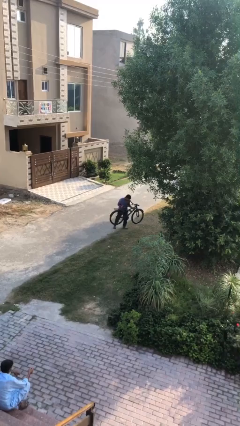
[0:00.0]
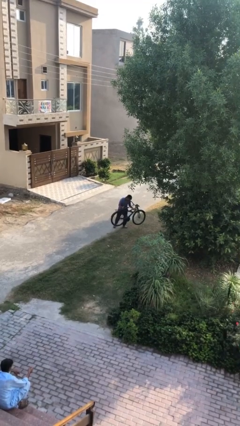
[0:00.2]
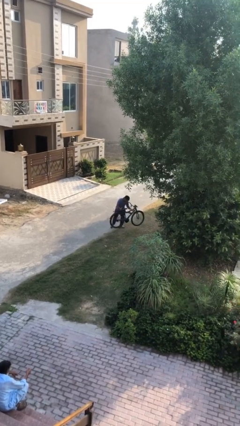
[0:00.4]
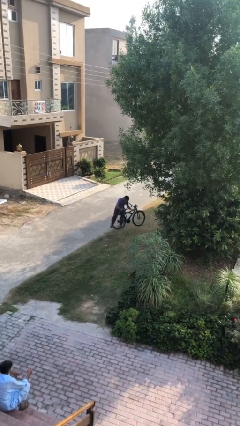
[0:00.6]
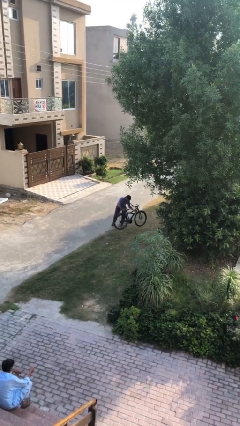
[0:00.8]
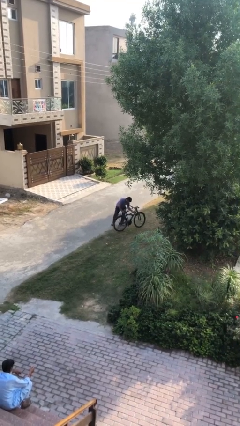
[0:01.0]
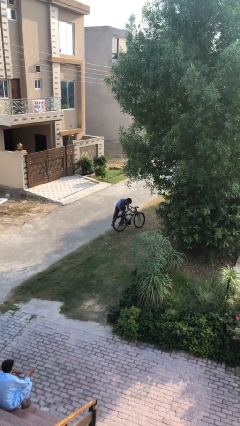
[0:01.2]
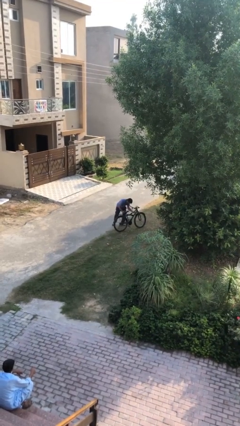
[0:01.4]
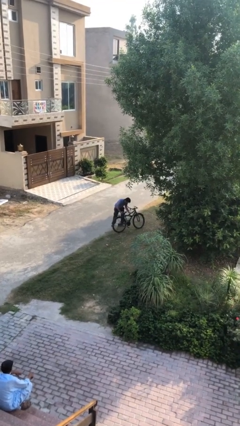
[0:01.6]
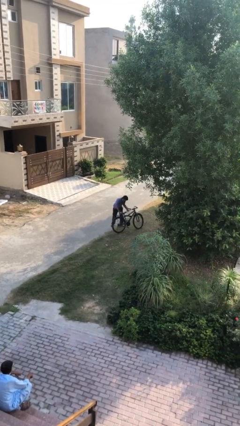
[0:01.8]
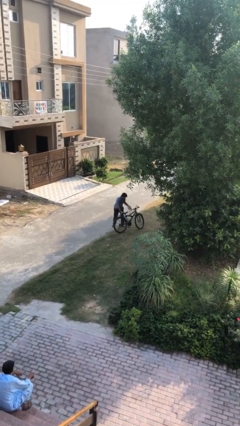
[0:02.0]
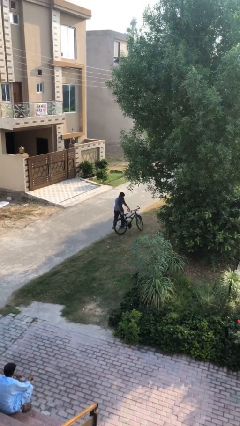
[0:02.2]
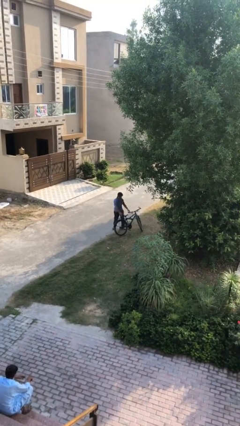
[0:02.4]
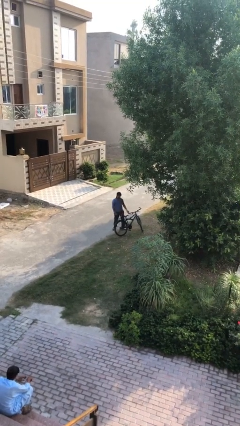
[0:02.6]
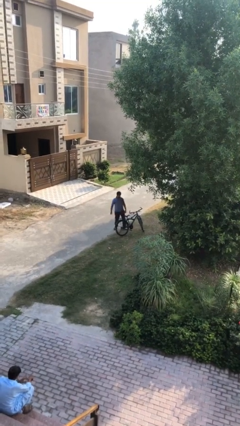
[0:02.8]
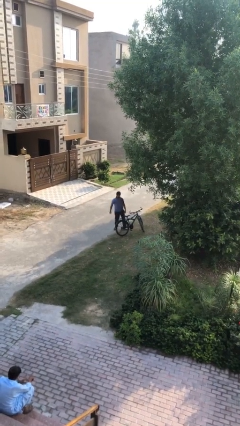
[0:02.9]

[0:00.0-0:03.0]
person puts down object on floor

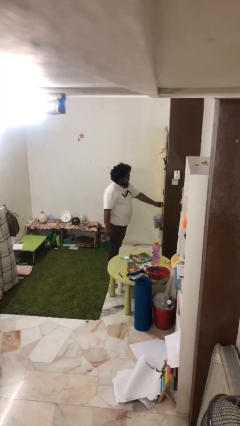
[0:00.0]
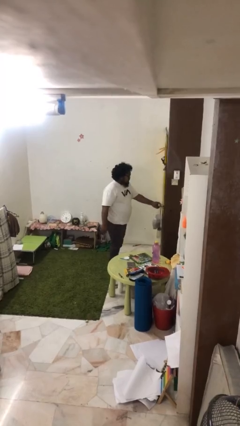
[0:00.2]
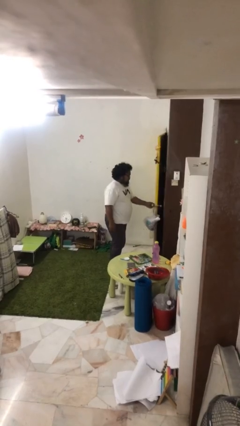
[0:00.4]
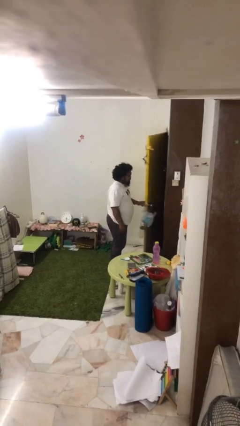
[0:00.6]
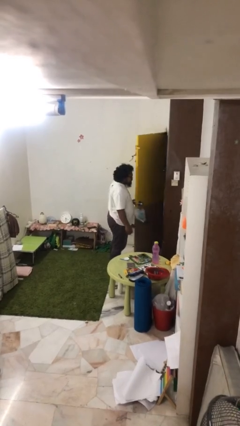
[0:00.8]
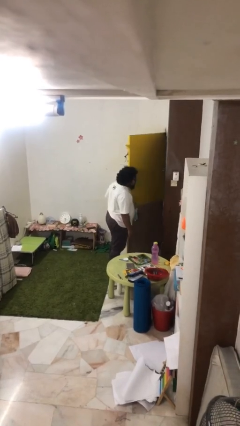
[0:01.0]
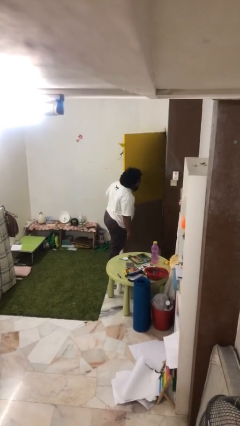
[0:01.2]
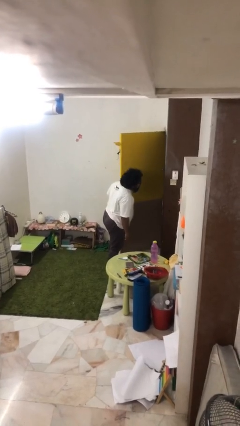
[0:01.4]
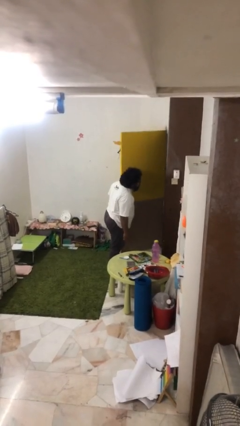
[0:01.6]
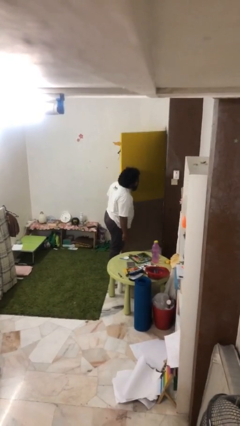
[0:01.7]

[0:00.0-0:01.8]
person opens facility door

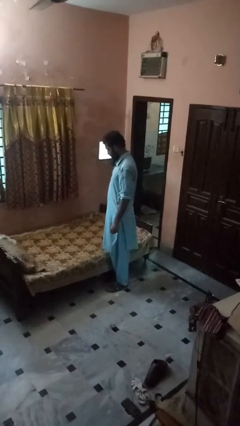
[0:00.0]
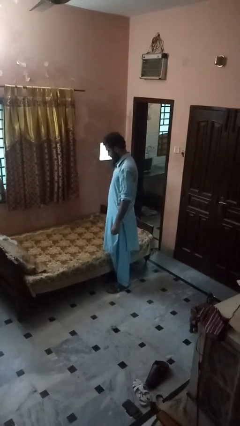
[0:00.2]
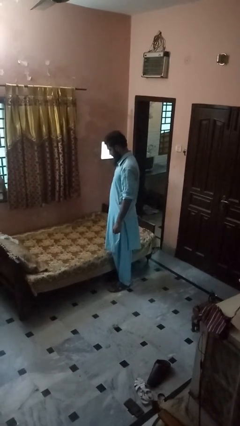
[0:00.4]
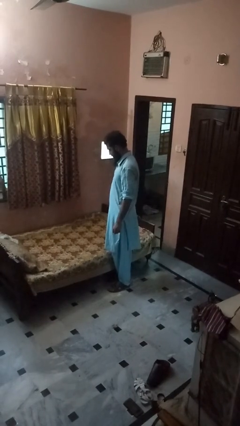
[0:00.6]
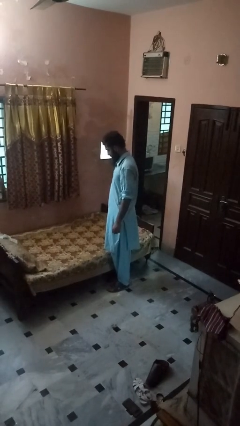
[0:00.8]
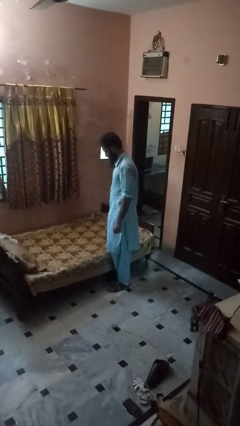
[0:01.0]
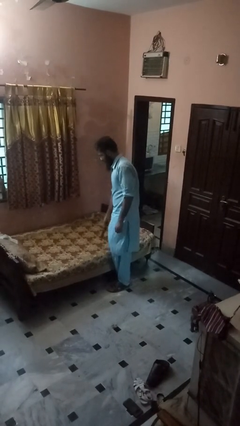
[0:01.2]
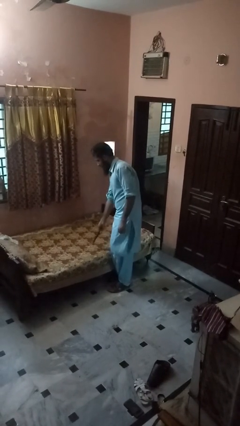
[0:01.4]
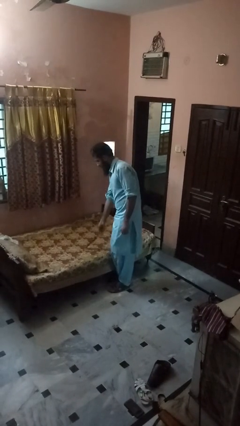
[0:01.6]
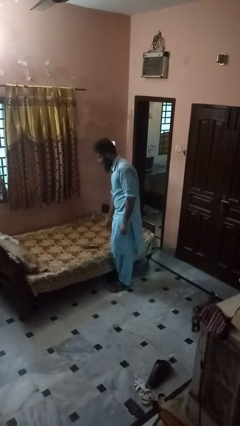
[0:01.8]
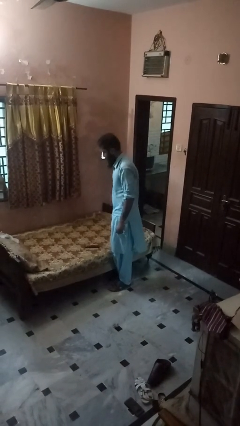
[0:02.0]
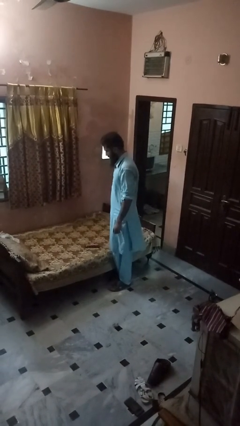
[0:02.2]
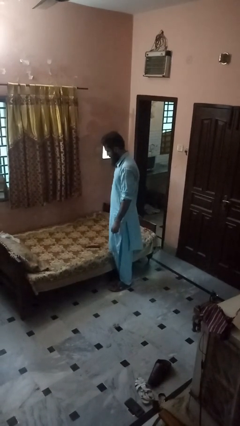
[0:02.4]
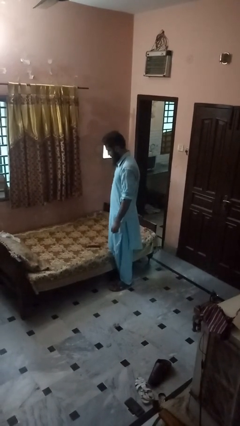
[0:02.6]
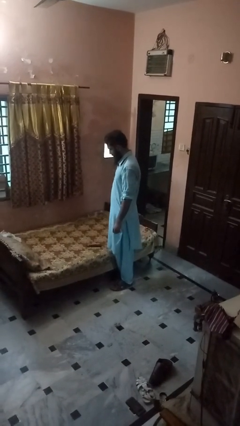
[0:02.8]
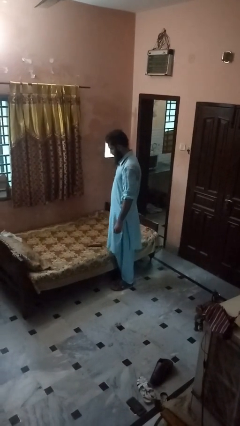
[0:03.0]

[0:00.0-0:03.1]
person puts down object on bed

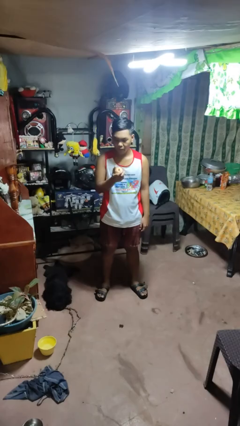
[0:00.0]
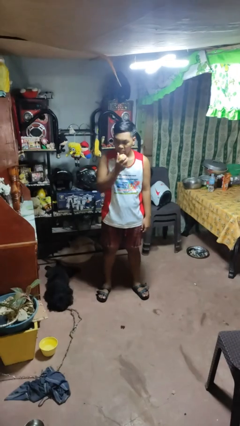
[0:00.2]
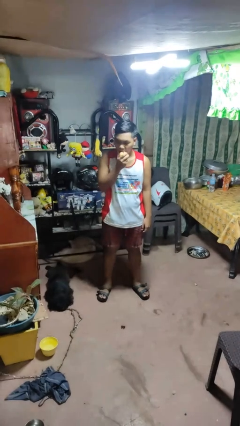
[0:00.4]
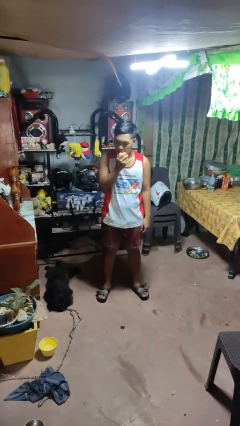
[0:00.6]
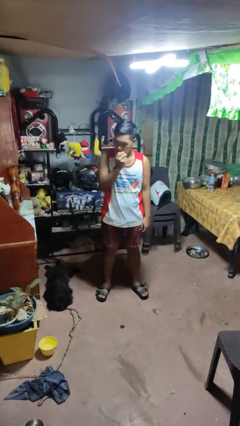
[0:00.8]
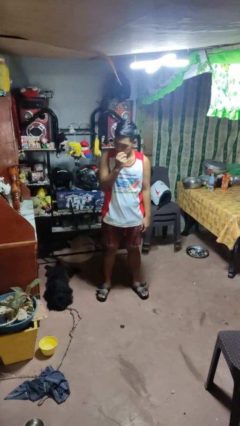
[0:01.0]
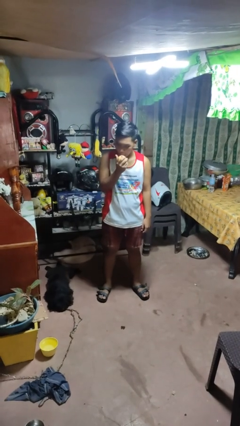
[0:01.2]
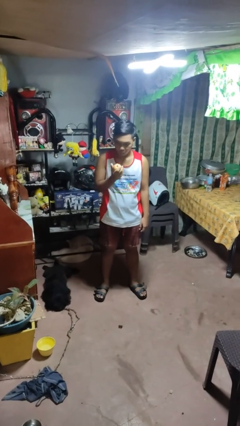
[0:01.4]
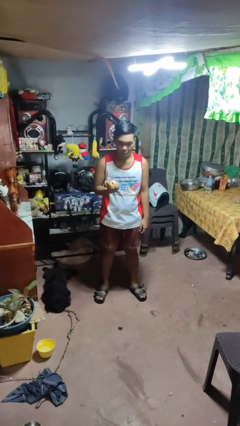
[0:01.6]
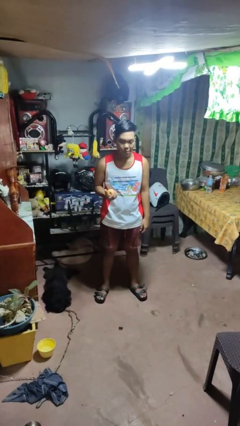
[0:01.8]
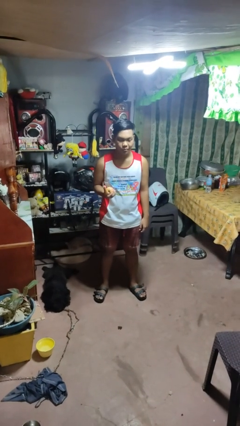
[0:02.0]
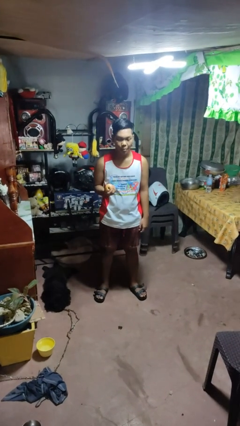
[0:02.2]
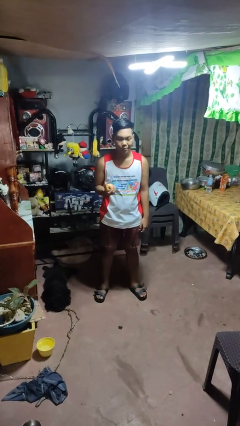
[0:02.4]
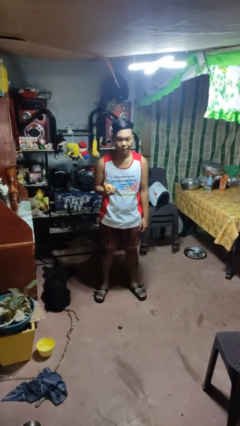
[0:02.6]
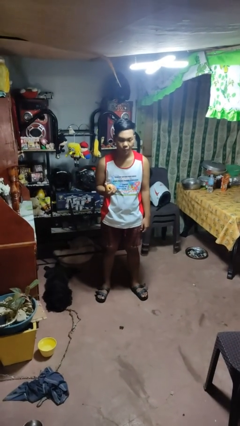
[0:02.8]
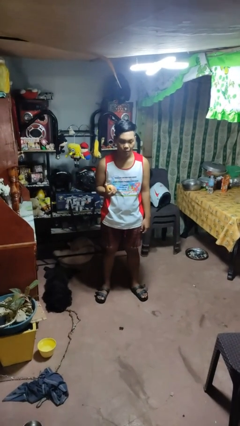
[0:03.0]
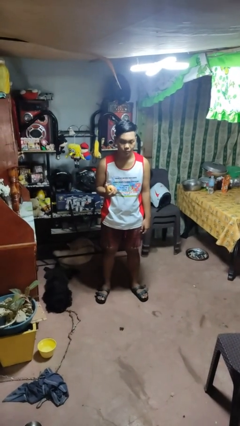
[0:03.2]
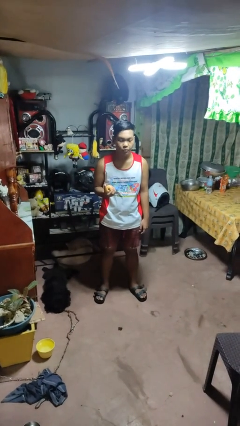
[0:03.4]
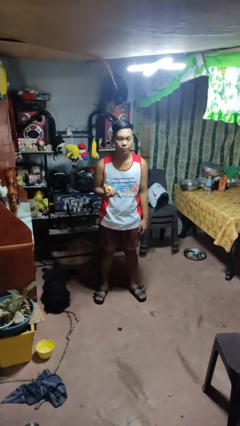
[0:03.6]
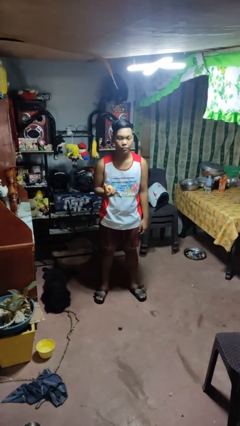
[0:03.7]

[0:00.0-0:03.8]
person eats apple

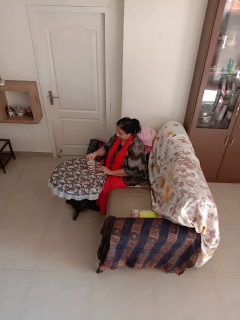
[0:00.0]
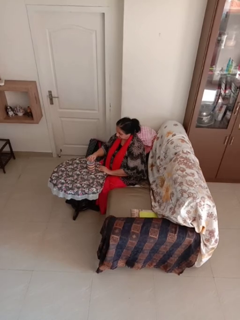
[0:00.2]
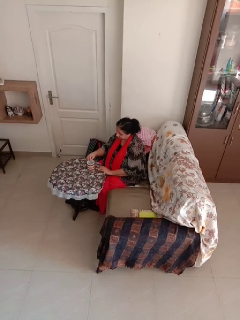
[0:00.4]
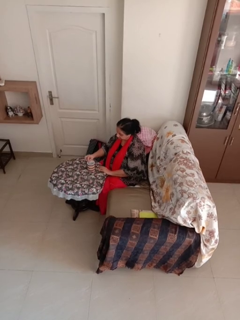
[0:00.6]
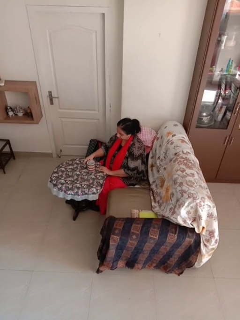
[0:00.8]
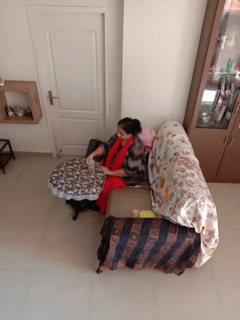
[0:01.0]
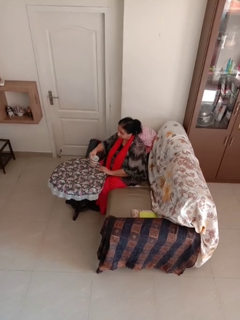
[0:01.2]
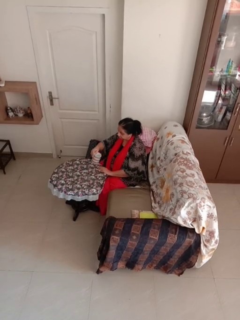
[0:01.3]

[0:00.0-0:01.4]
person stirs mug

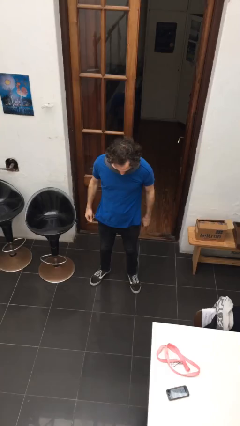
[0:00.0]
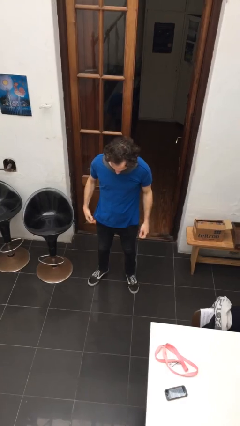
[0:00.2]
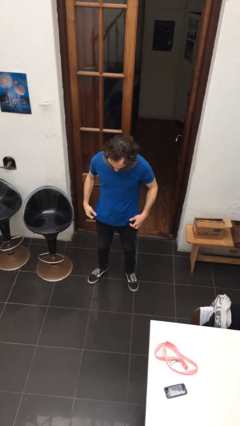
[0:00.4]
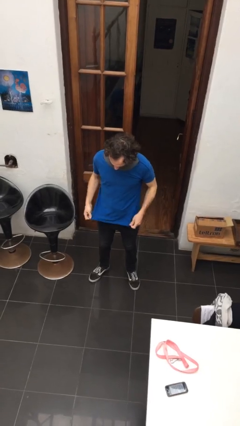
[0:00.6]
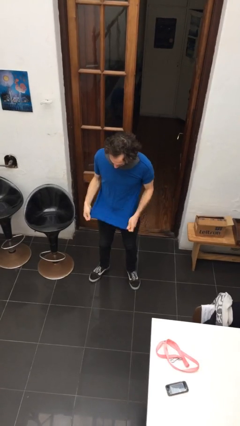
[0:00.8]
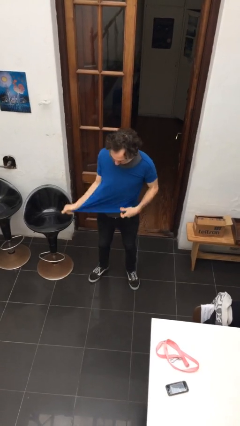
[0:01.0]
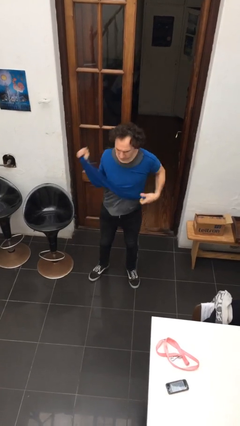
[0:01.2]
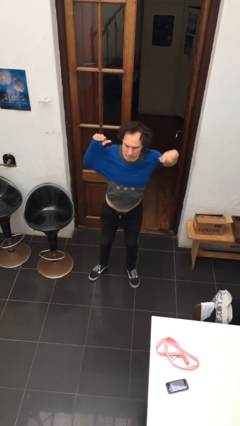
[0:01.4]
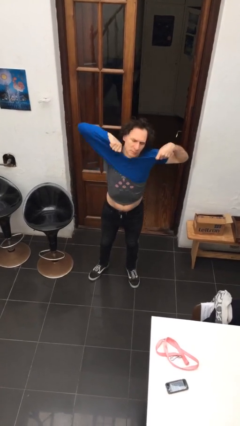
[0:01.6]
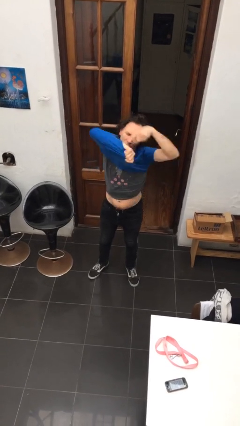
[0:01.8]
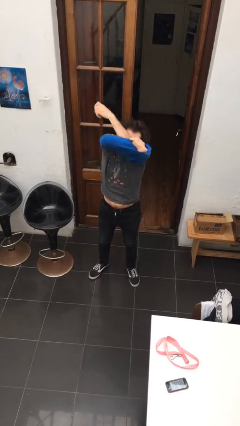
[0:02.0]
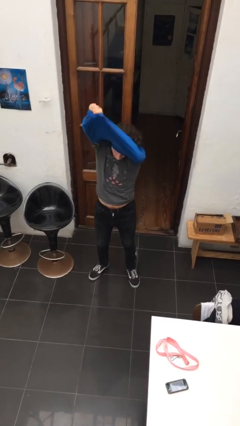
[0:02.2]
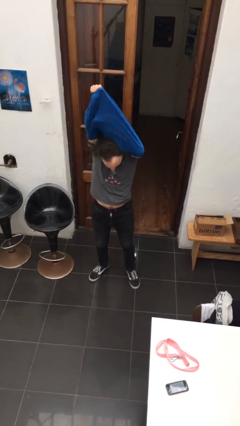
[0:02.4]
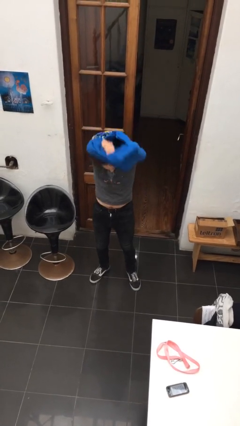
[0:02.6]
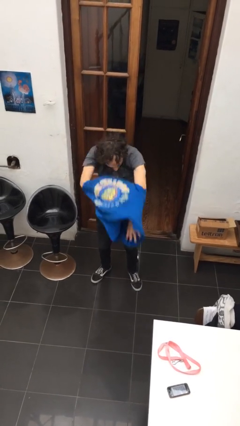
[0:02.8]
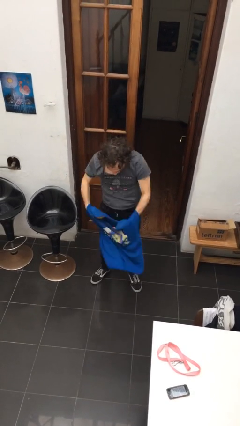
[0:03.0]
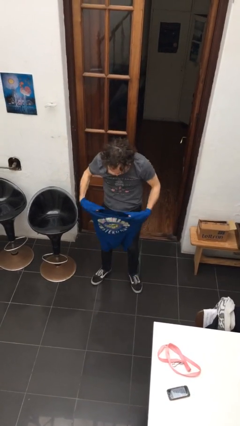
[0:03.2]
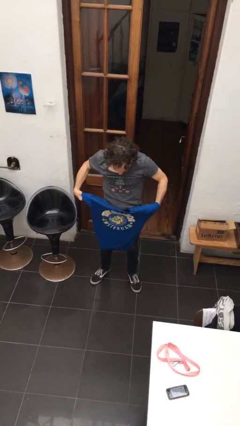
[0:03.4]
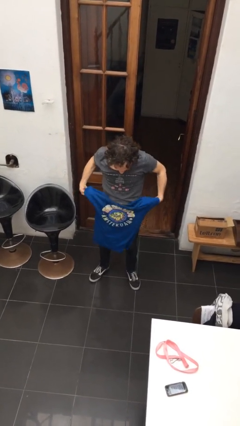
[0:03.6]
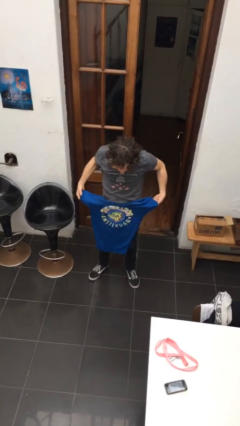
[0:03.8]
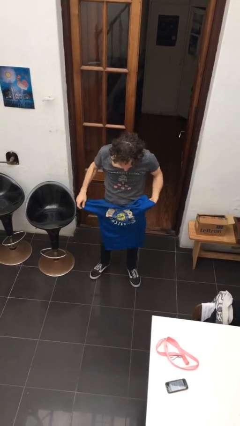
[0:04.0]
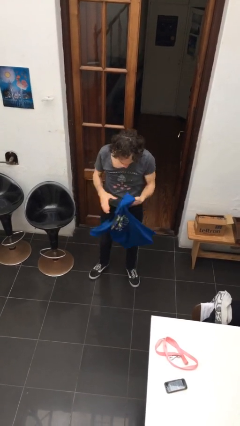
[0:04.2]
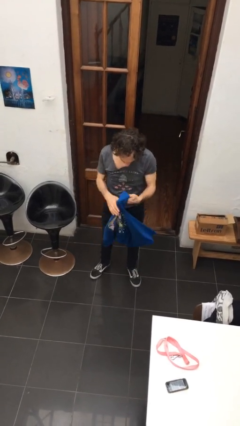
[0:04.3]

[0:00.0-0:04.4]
person takes off shirt

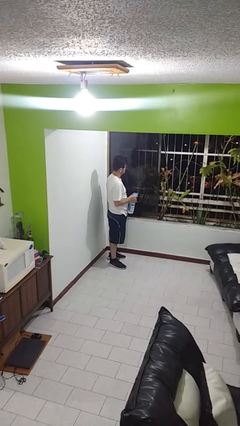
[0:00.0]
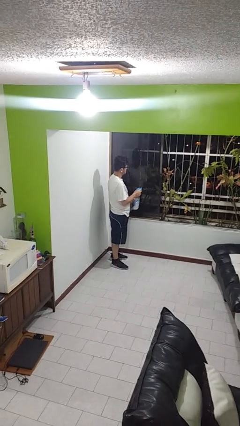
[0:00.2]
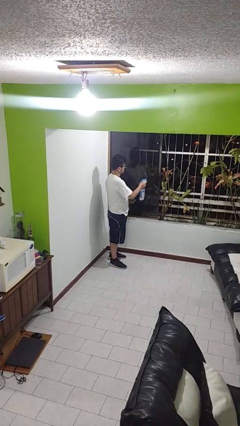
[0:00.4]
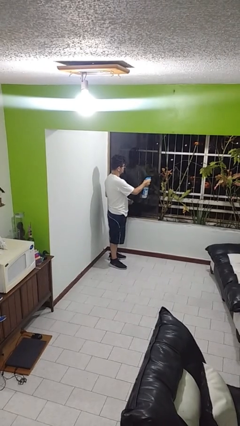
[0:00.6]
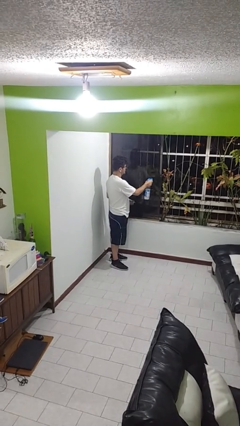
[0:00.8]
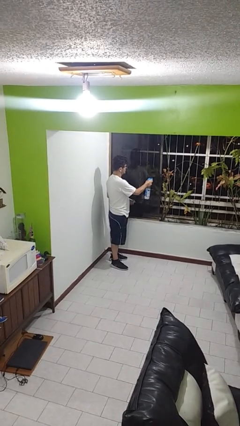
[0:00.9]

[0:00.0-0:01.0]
person sprays from bottle
